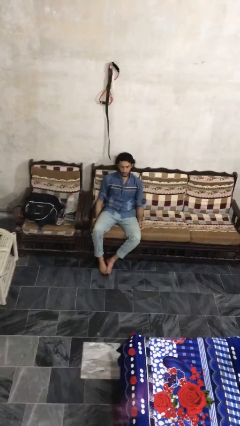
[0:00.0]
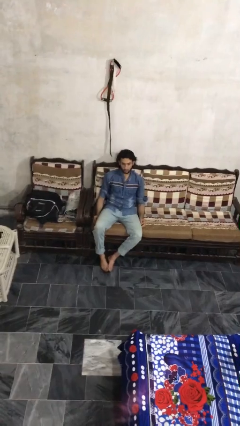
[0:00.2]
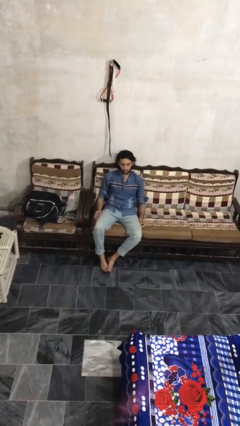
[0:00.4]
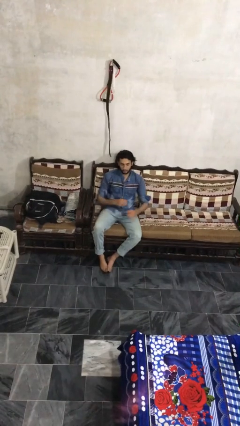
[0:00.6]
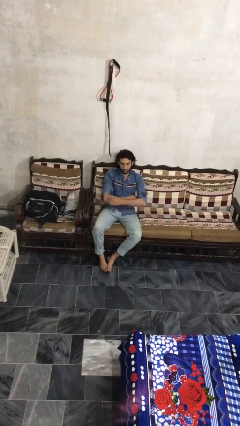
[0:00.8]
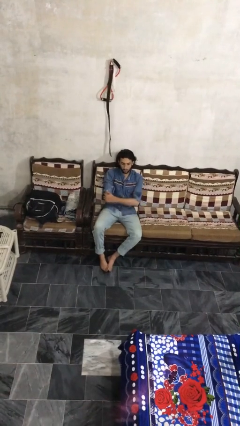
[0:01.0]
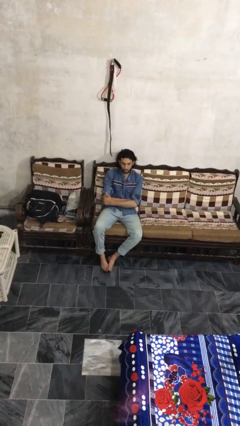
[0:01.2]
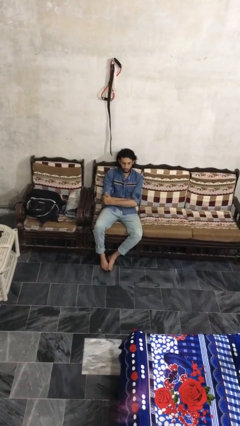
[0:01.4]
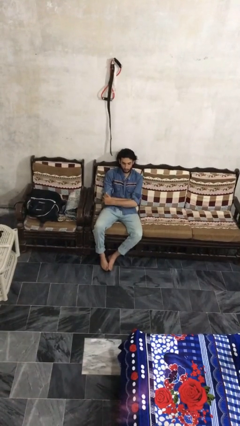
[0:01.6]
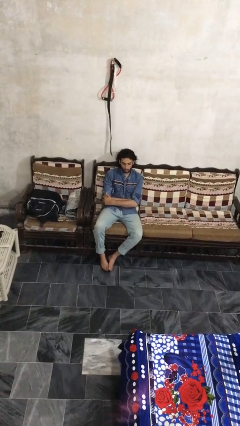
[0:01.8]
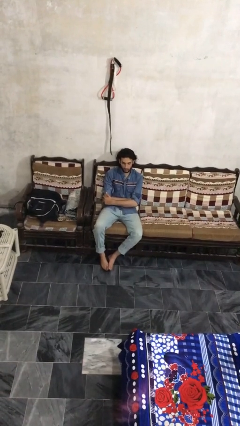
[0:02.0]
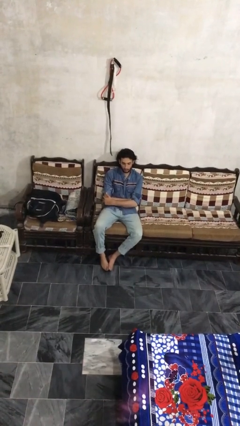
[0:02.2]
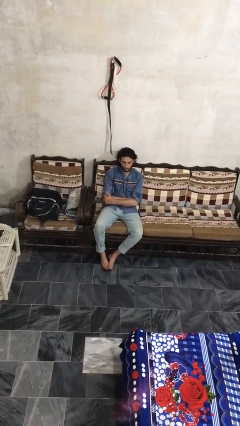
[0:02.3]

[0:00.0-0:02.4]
person crosses arms

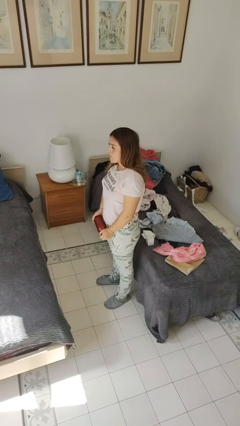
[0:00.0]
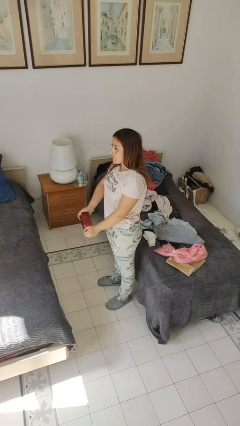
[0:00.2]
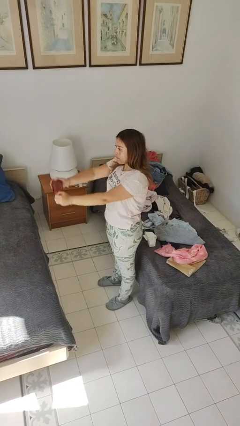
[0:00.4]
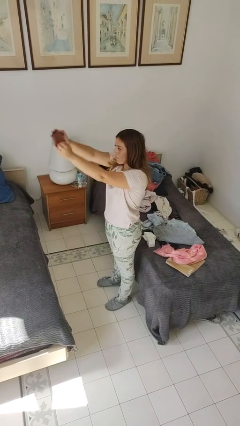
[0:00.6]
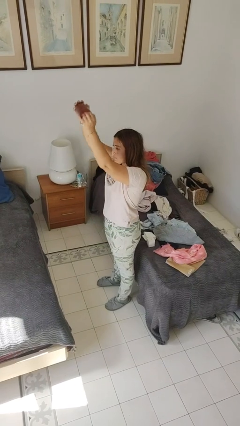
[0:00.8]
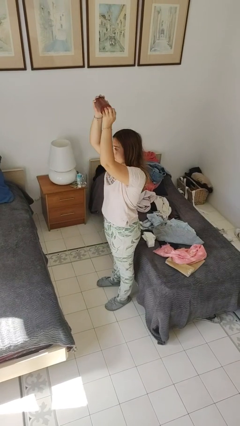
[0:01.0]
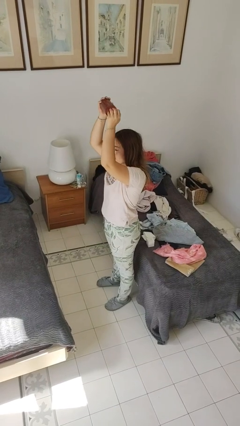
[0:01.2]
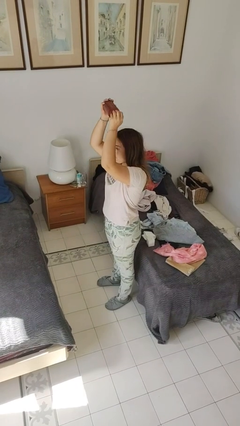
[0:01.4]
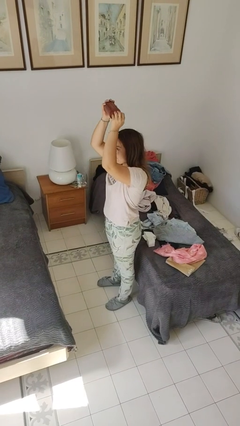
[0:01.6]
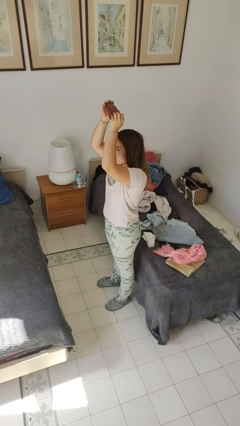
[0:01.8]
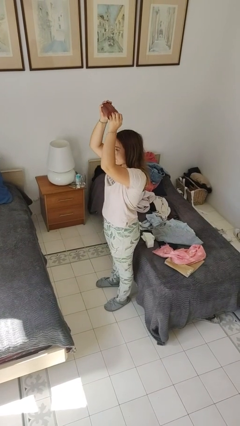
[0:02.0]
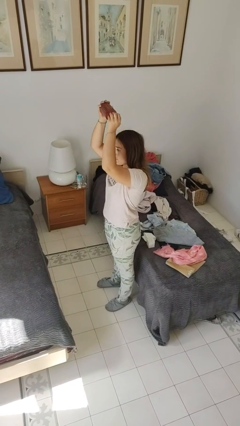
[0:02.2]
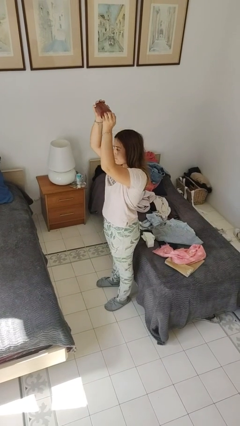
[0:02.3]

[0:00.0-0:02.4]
person holds object above head

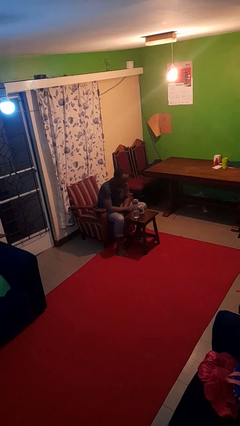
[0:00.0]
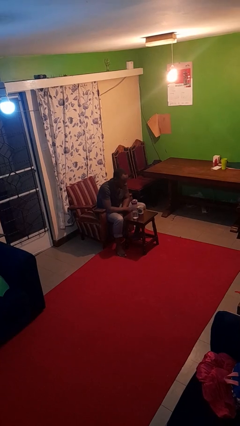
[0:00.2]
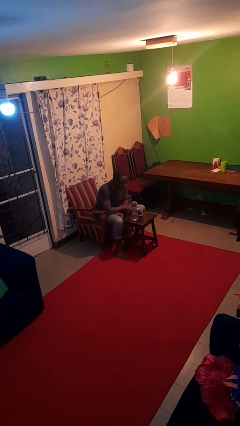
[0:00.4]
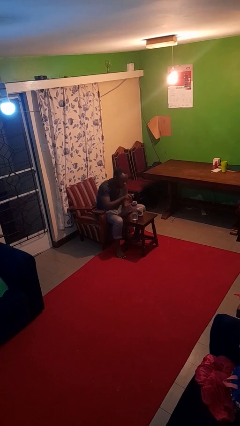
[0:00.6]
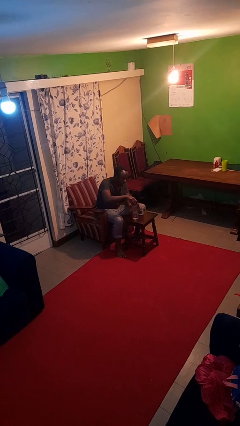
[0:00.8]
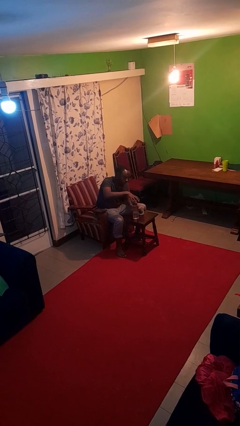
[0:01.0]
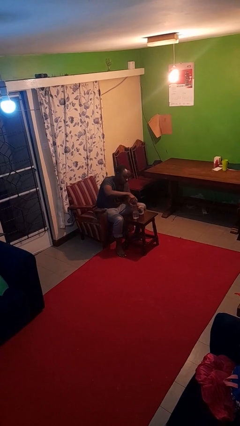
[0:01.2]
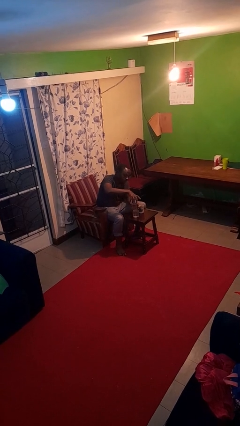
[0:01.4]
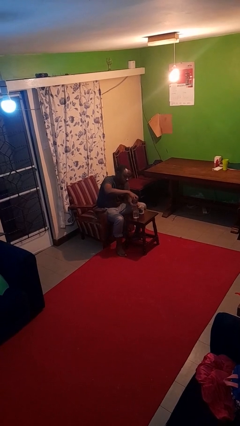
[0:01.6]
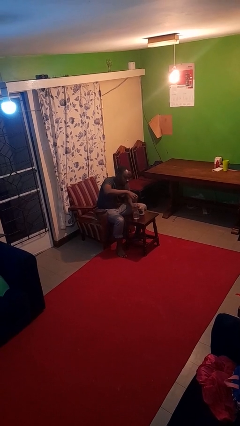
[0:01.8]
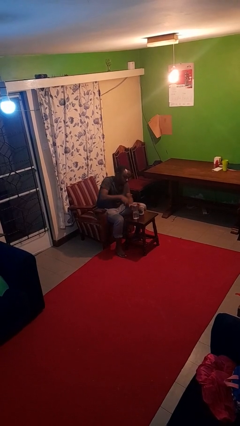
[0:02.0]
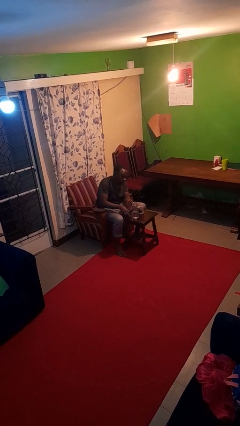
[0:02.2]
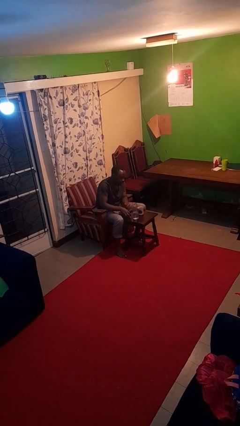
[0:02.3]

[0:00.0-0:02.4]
person unscrews lid from bottle

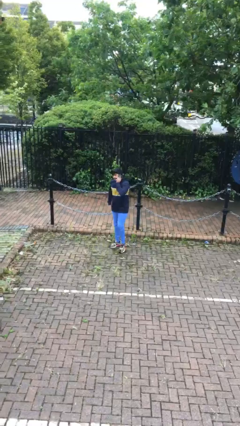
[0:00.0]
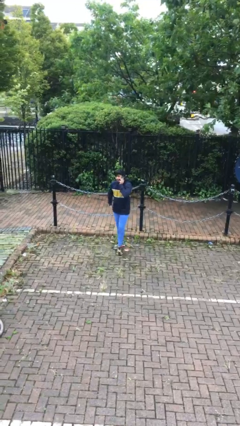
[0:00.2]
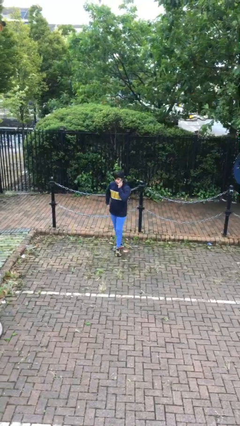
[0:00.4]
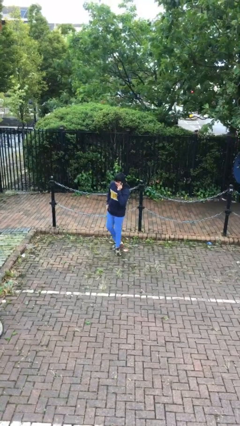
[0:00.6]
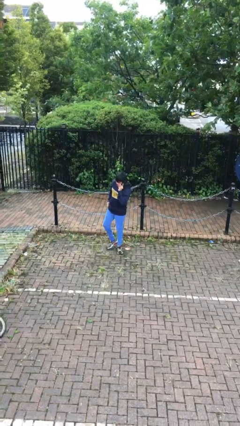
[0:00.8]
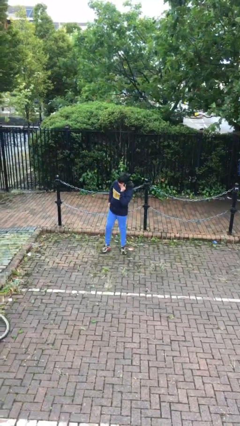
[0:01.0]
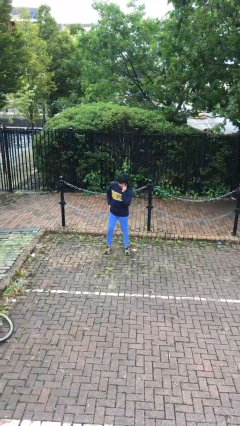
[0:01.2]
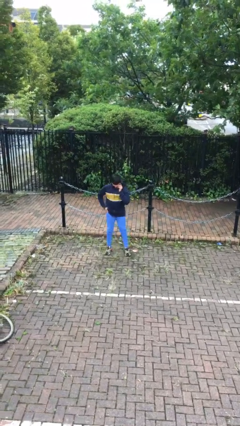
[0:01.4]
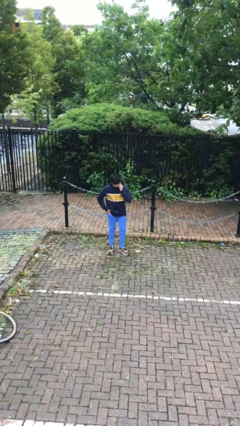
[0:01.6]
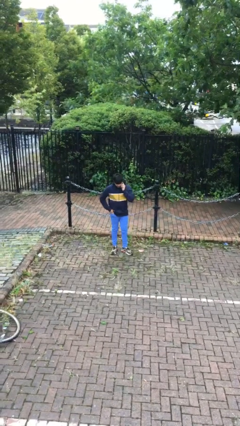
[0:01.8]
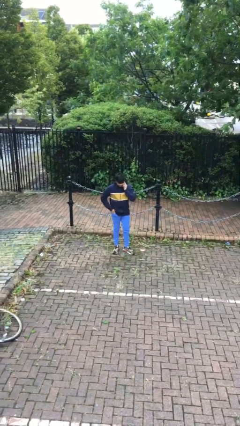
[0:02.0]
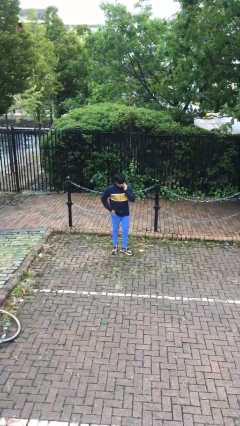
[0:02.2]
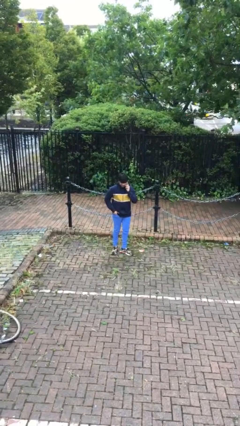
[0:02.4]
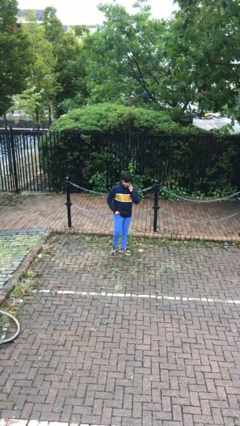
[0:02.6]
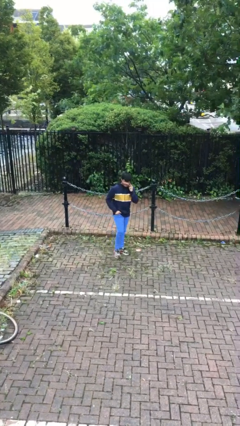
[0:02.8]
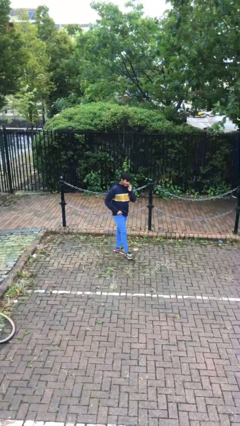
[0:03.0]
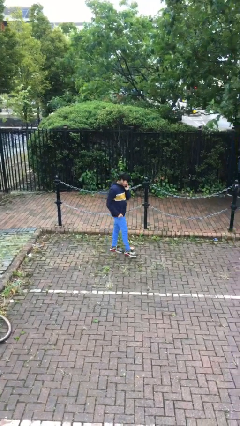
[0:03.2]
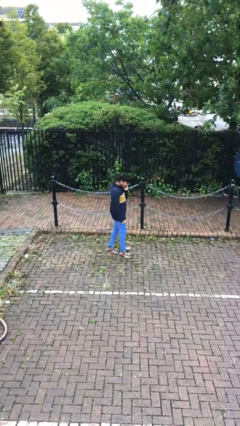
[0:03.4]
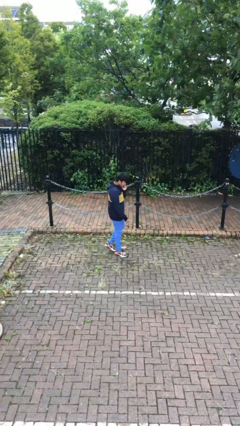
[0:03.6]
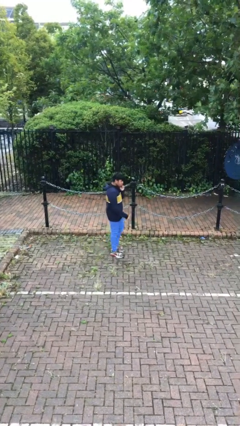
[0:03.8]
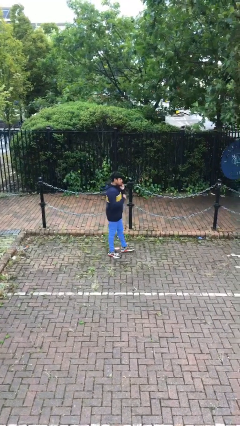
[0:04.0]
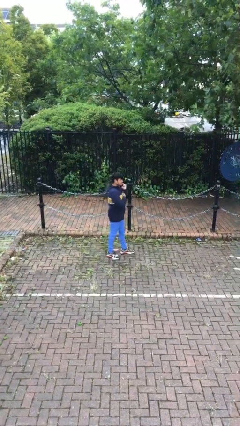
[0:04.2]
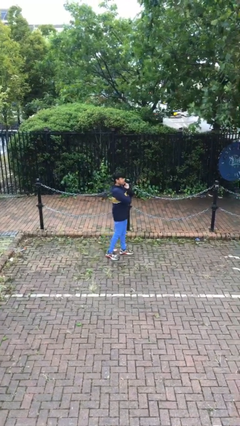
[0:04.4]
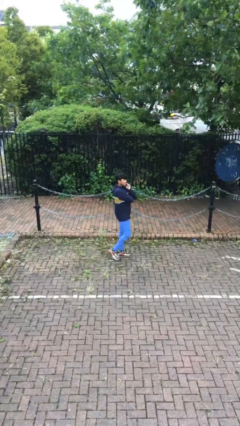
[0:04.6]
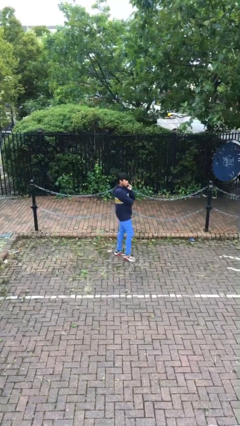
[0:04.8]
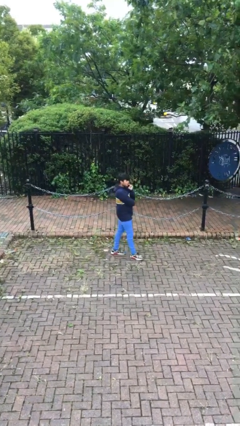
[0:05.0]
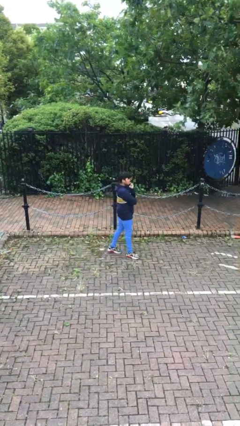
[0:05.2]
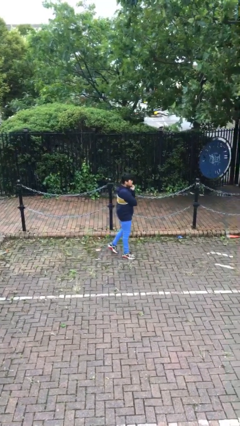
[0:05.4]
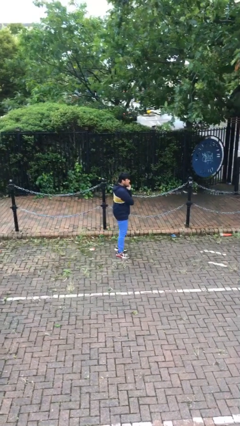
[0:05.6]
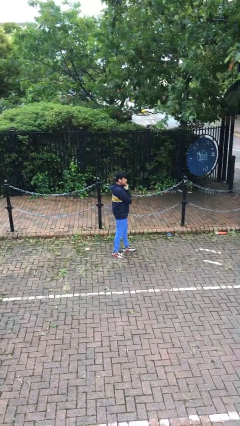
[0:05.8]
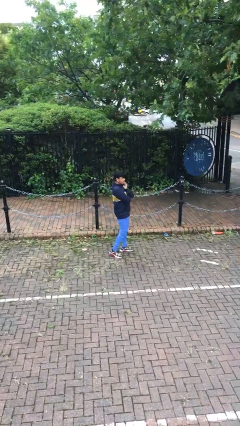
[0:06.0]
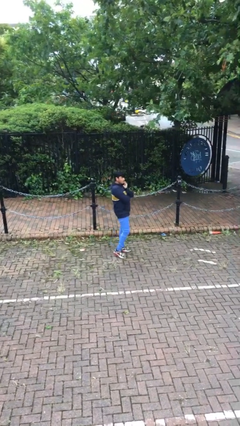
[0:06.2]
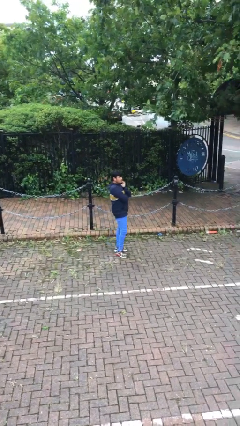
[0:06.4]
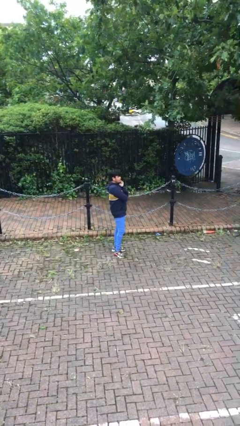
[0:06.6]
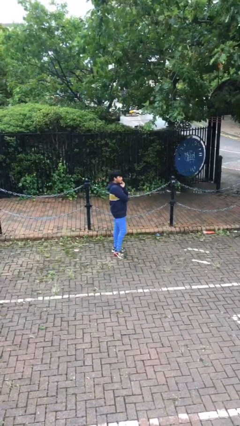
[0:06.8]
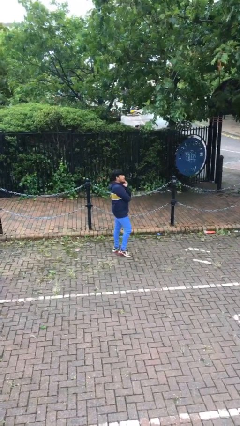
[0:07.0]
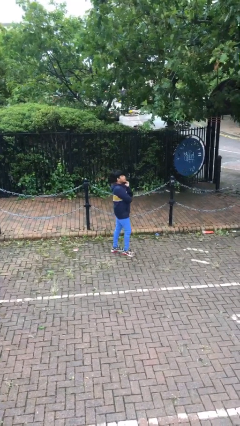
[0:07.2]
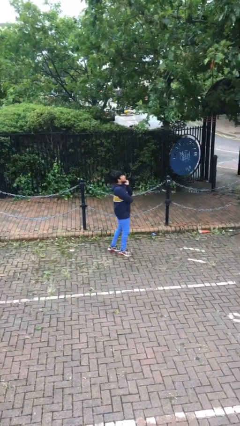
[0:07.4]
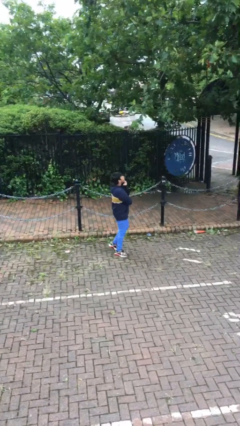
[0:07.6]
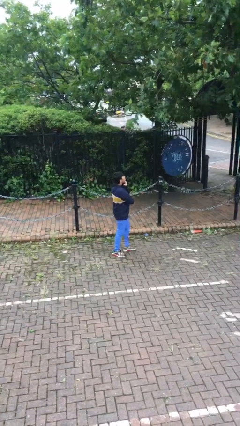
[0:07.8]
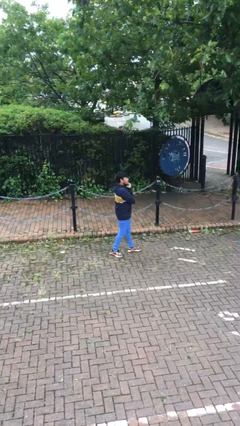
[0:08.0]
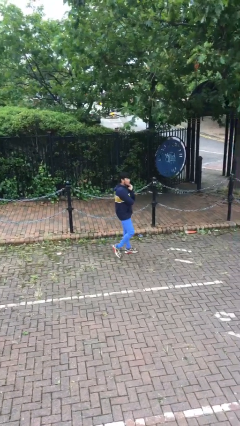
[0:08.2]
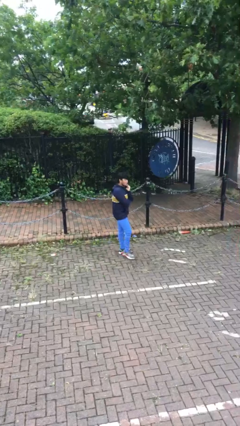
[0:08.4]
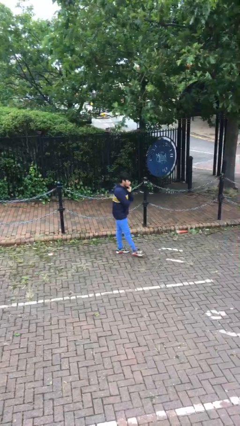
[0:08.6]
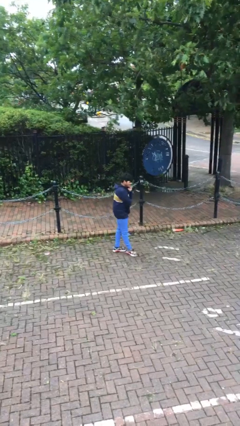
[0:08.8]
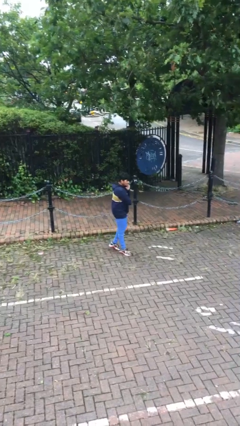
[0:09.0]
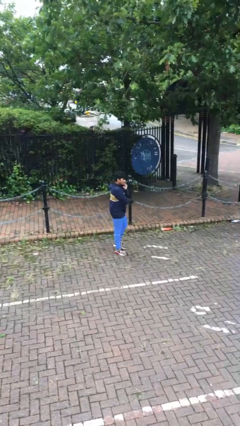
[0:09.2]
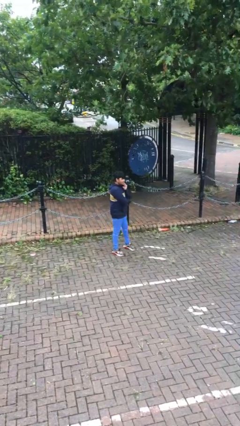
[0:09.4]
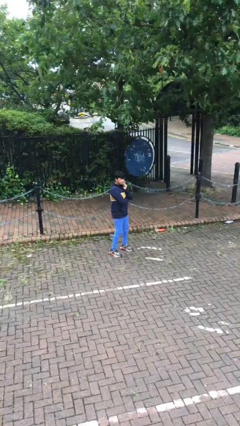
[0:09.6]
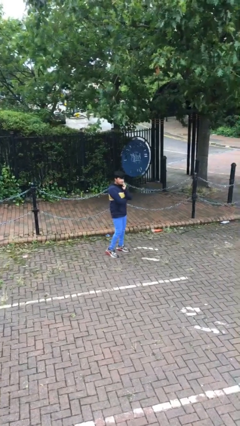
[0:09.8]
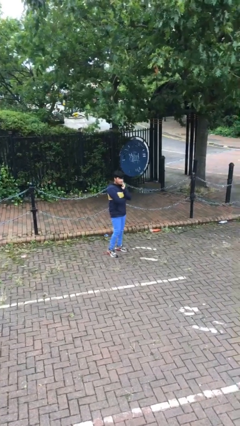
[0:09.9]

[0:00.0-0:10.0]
person talks on phone
